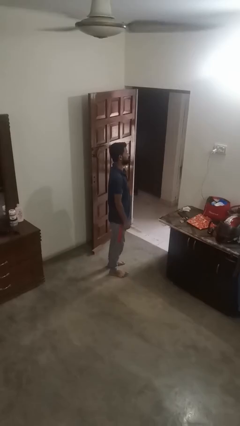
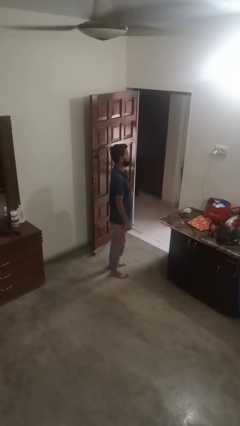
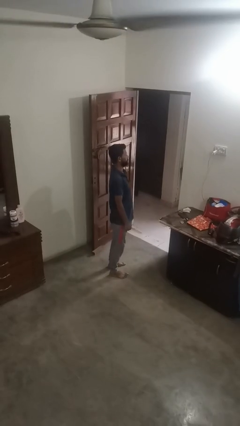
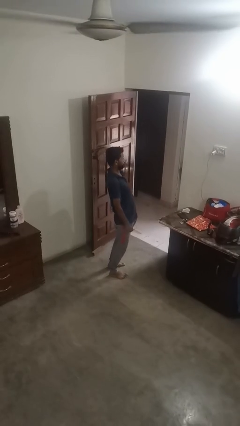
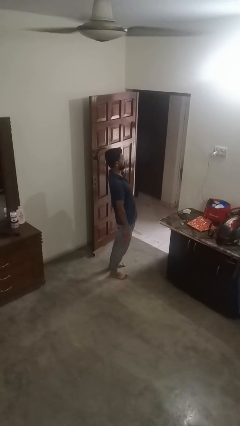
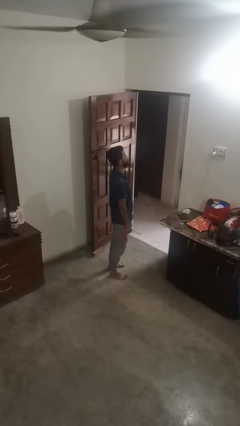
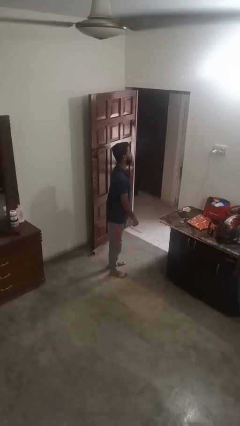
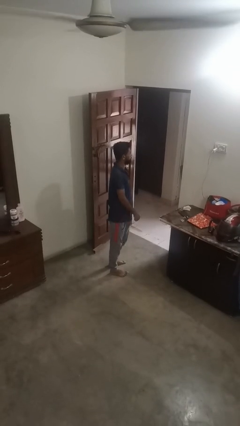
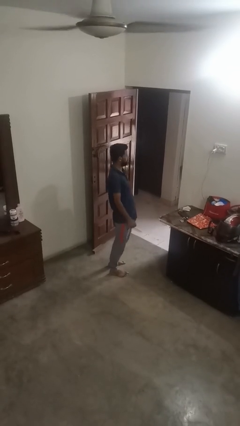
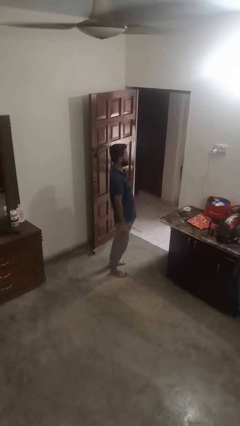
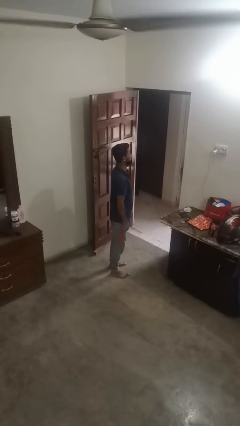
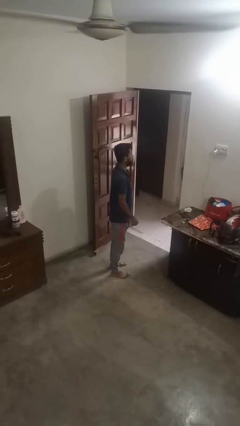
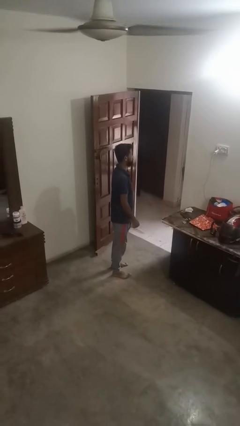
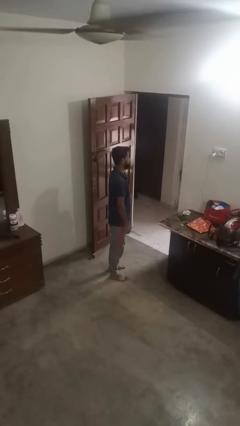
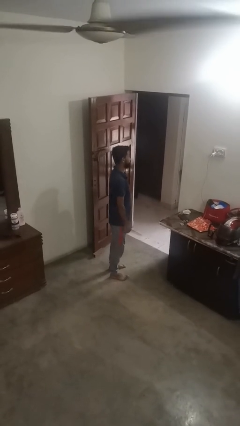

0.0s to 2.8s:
person wiggles hips

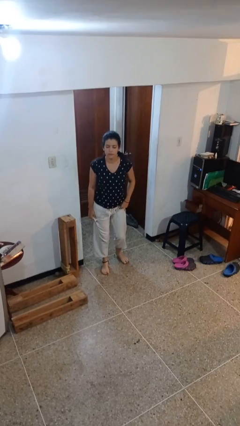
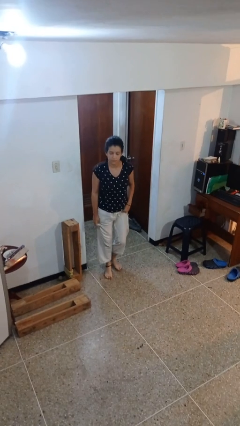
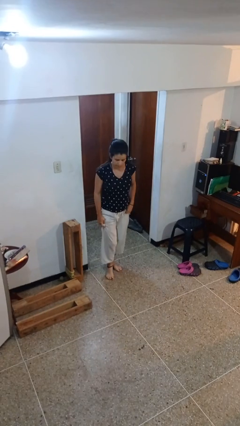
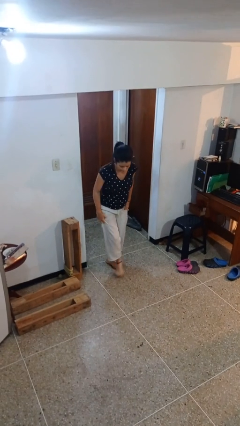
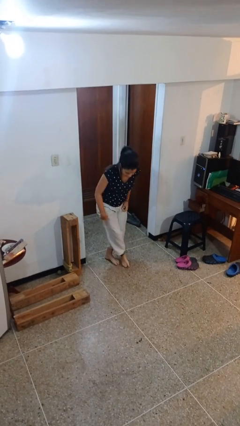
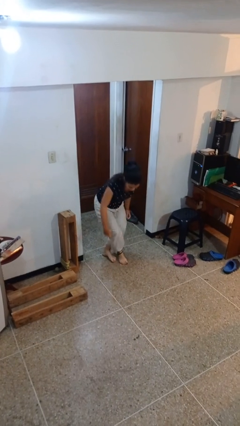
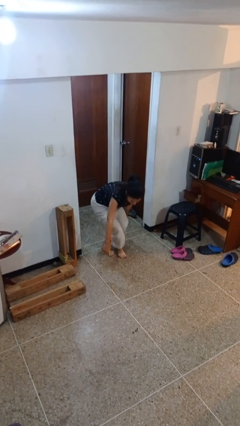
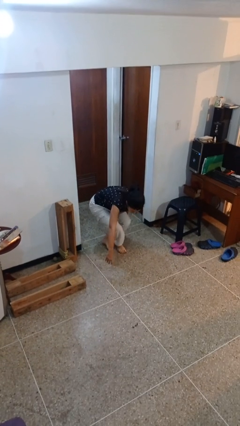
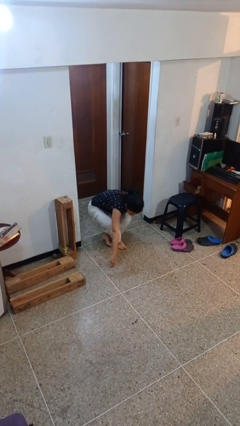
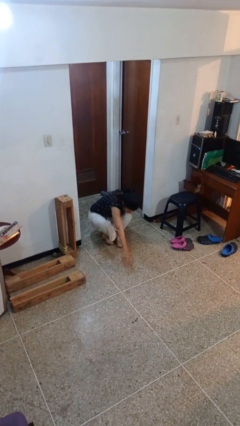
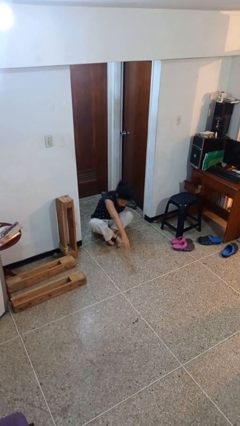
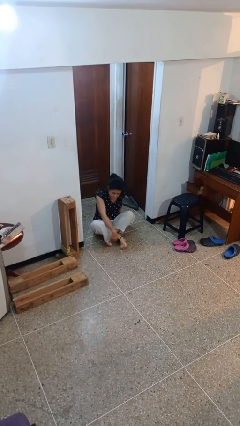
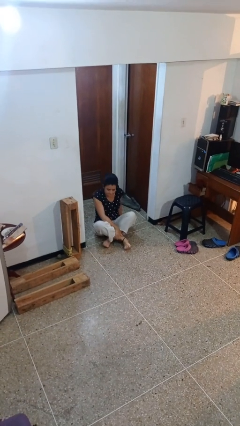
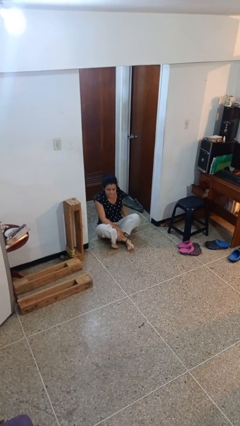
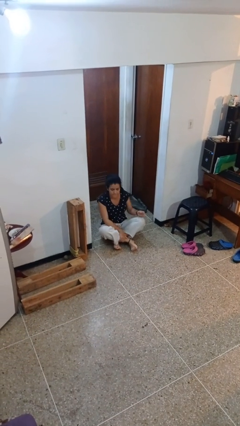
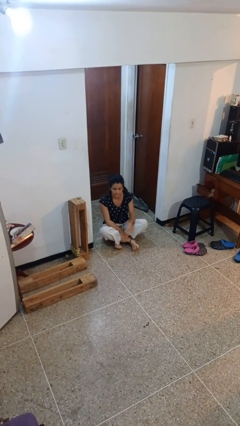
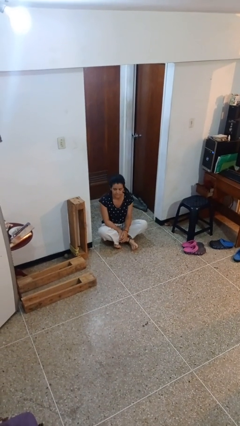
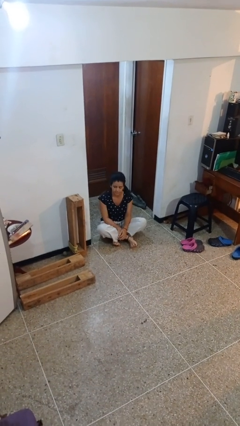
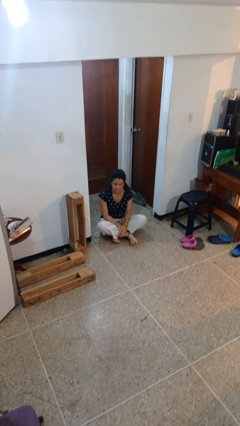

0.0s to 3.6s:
person sits crisscross

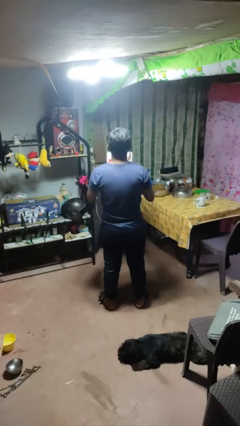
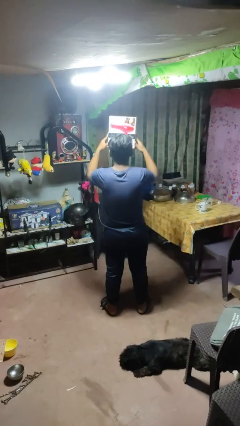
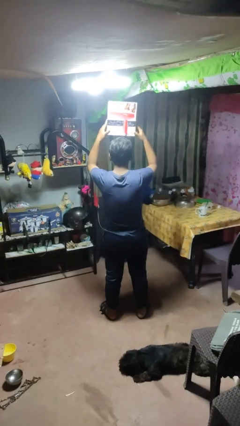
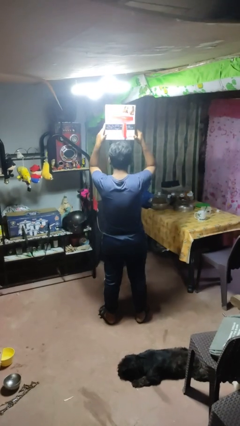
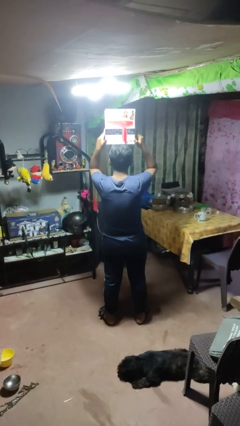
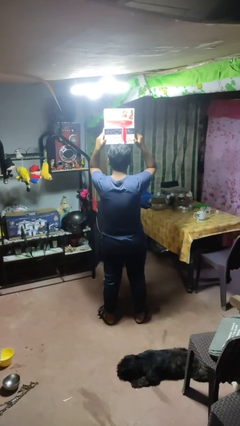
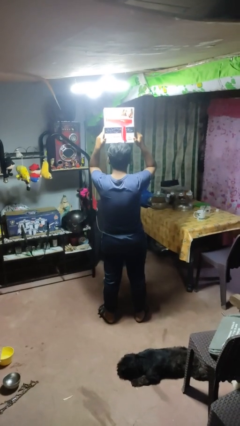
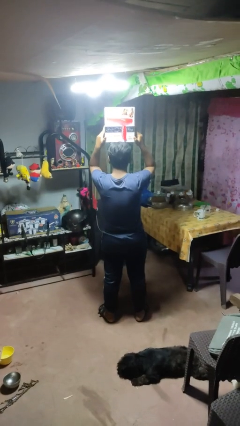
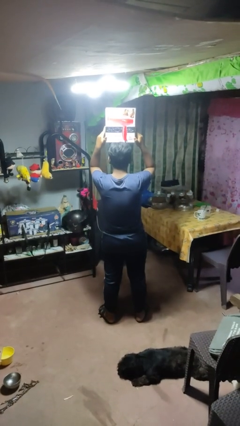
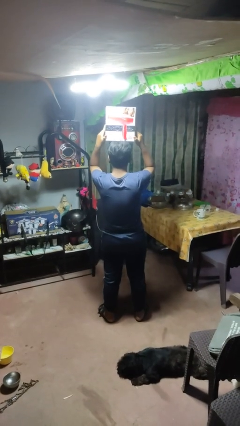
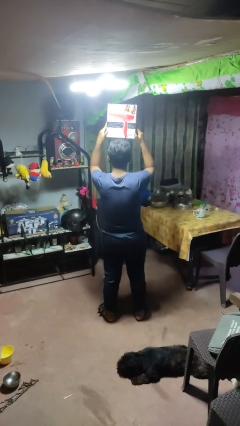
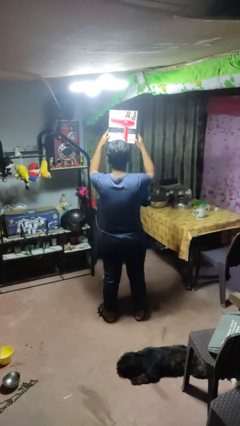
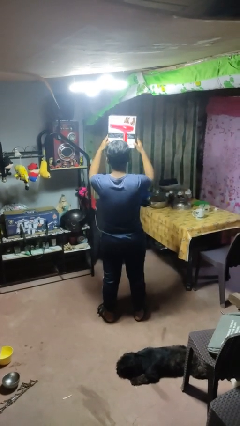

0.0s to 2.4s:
person holds object above head

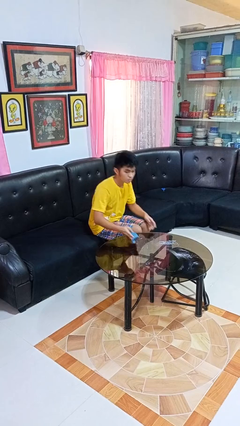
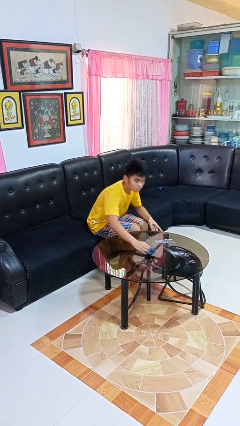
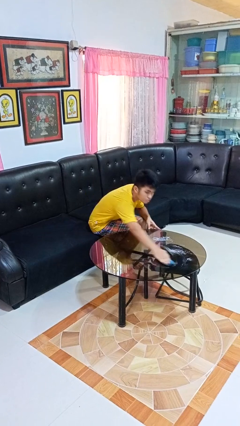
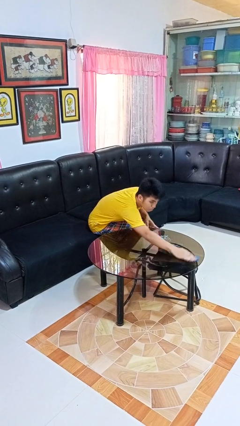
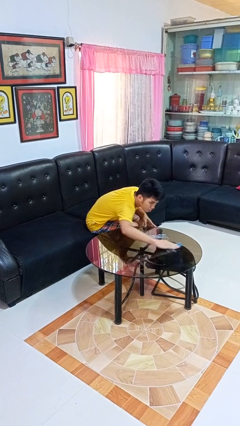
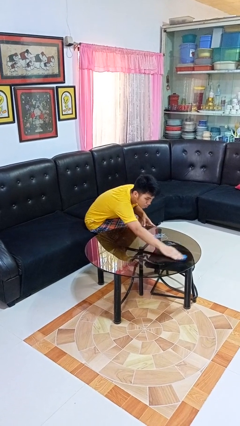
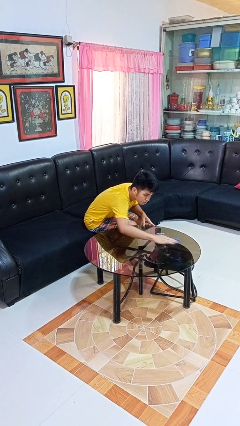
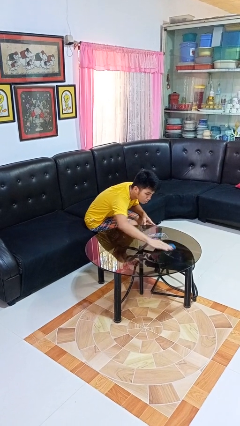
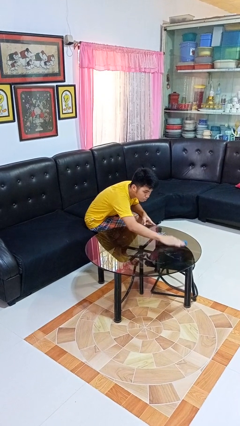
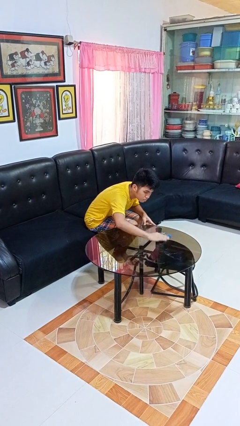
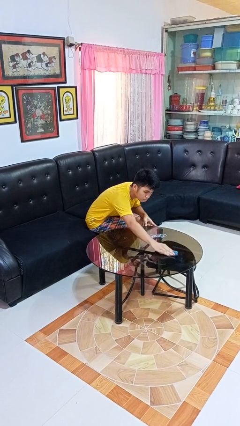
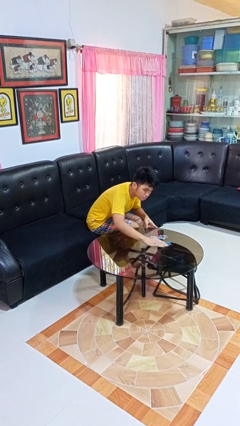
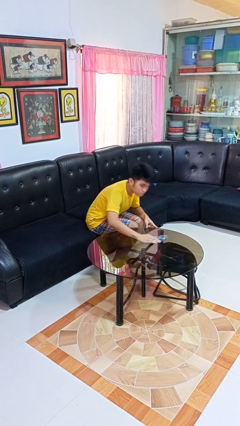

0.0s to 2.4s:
person cleans table with rag

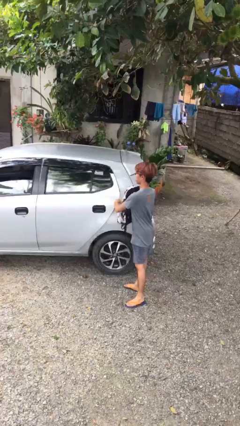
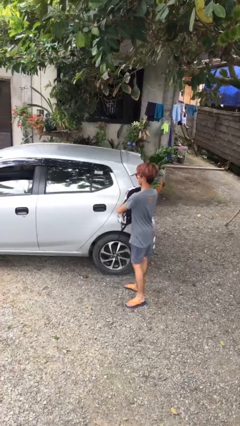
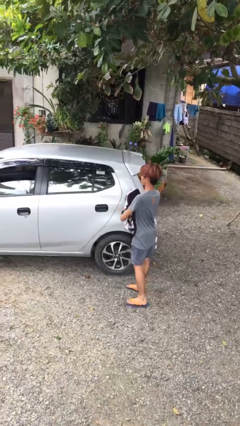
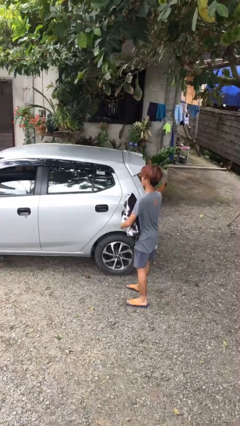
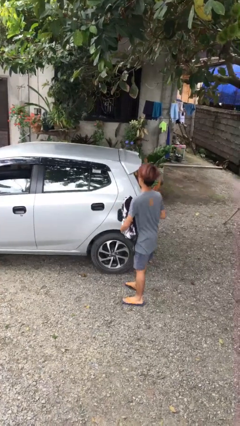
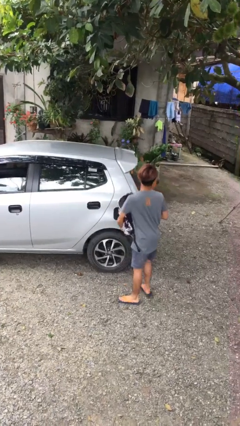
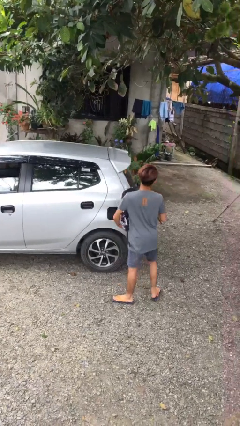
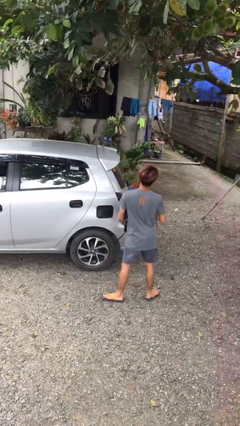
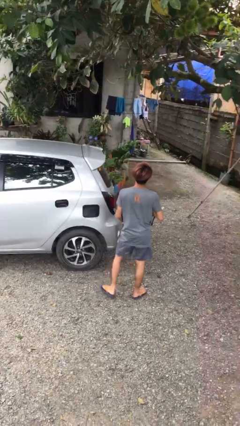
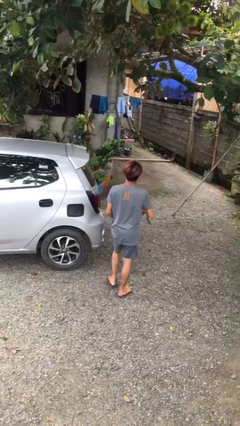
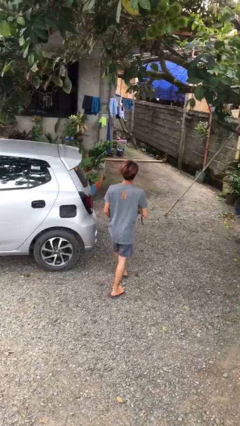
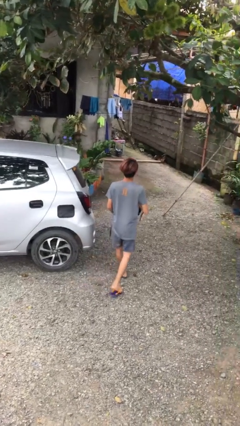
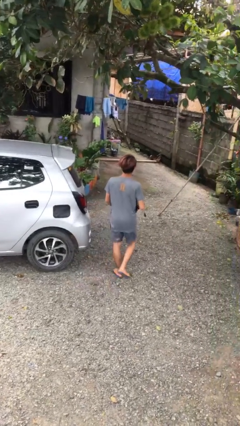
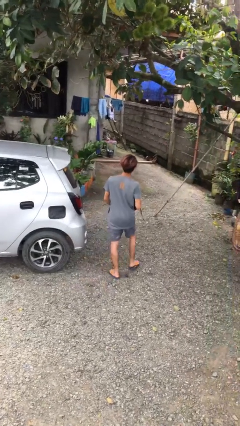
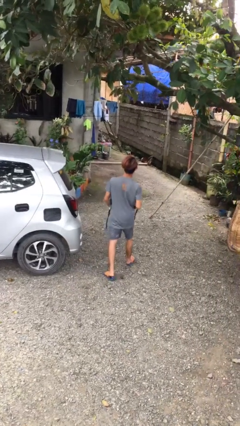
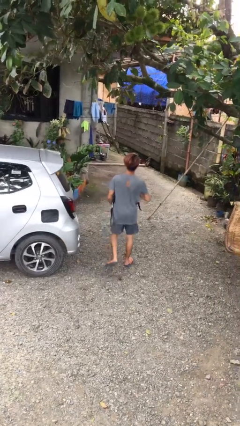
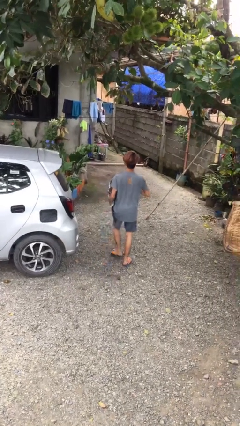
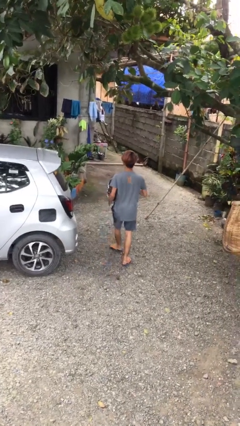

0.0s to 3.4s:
person closes car door

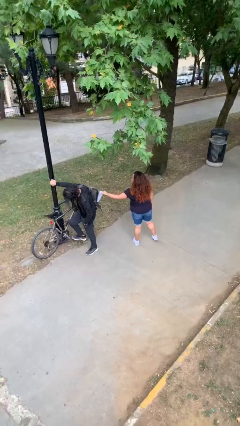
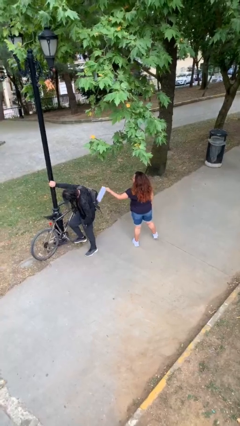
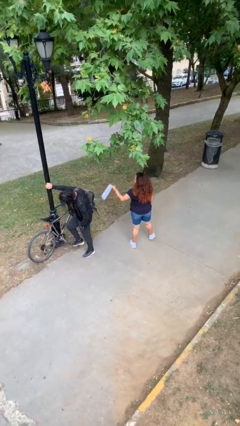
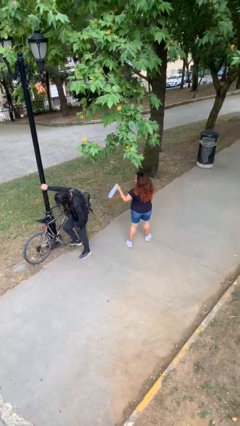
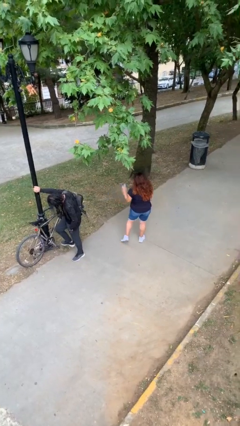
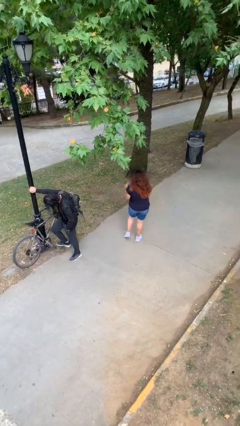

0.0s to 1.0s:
person steals object from person

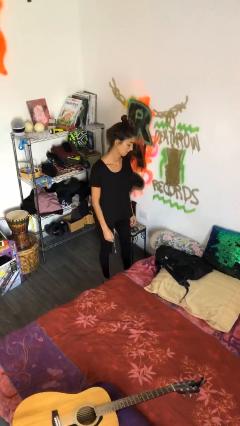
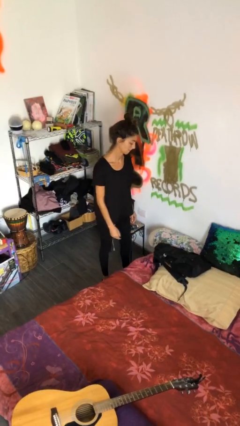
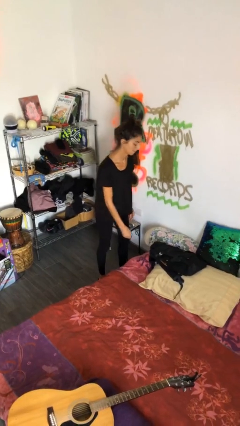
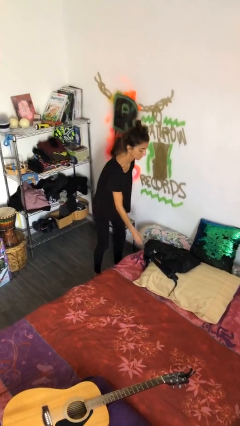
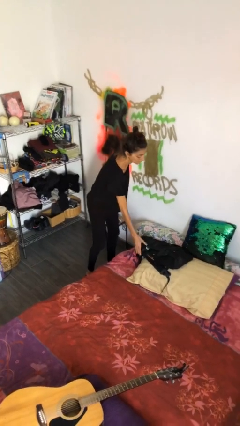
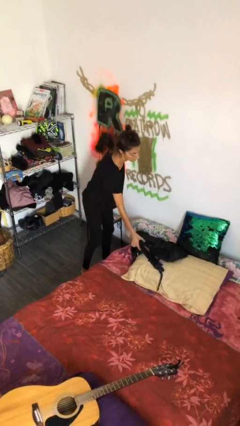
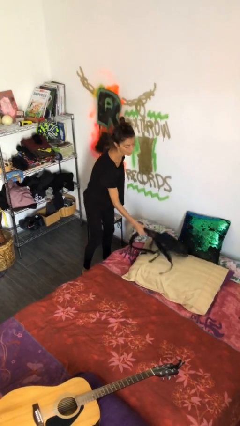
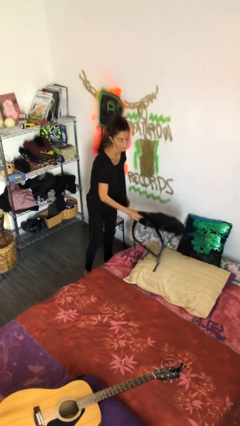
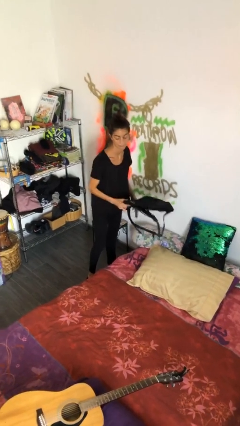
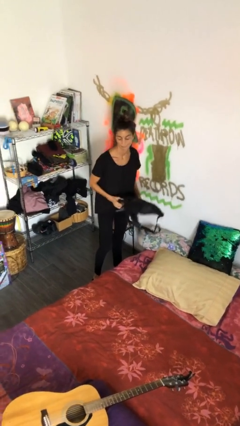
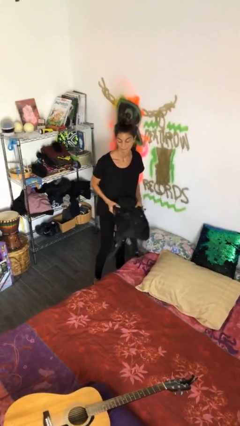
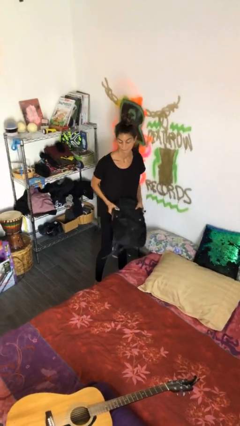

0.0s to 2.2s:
person picks up object from bed
